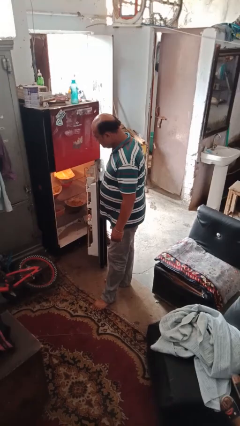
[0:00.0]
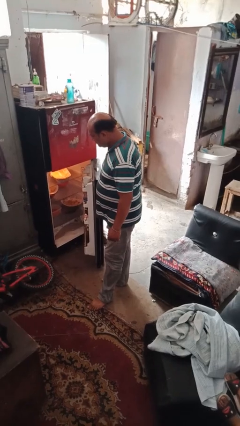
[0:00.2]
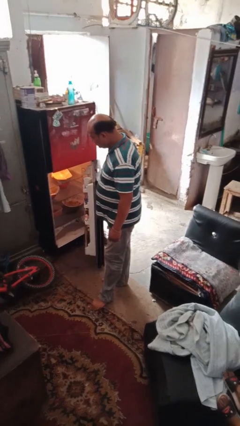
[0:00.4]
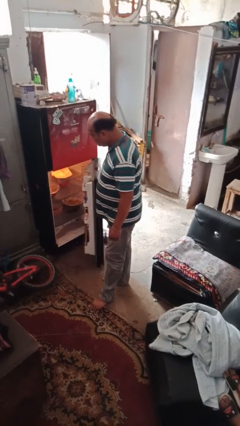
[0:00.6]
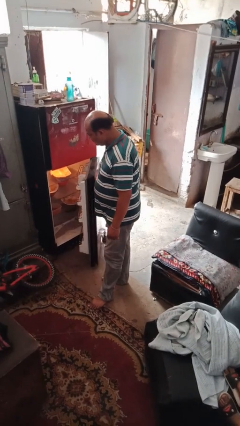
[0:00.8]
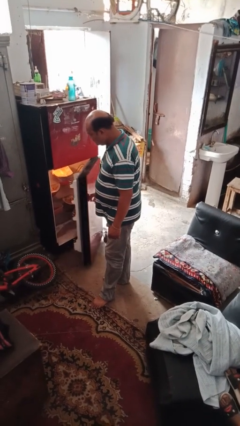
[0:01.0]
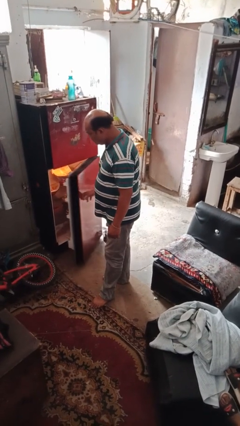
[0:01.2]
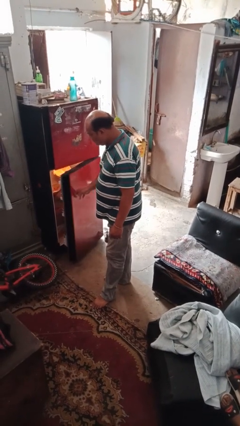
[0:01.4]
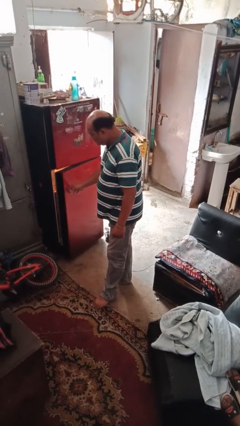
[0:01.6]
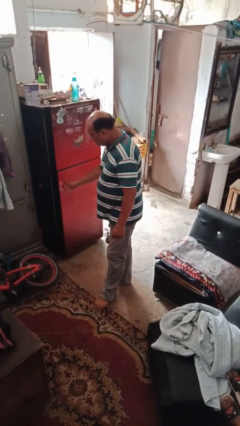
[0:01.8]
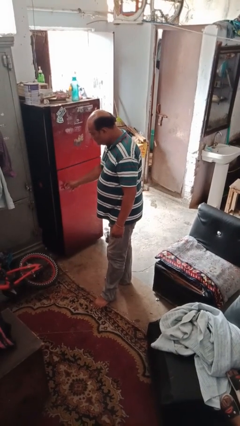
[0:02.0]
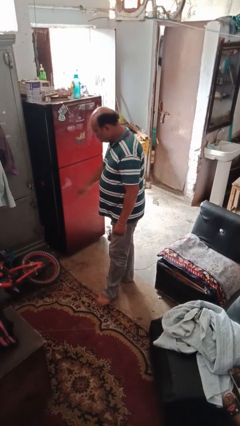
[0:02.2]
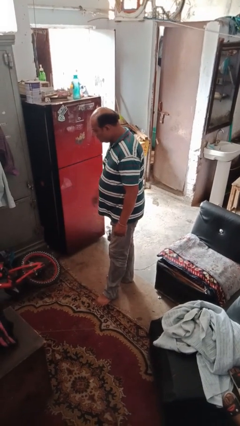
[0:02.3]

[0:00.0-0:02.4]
person closes refrigerator

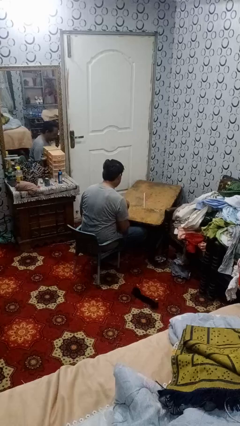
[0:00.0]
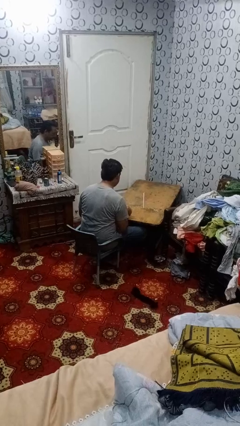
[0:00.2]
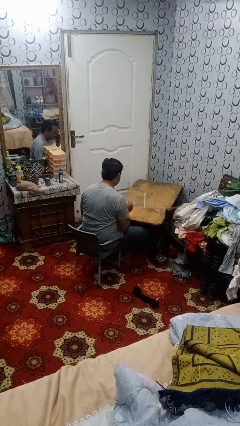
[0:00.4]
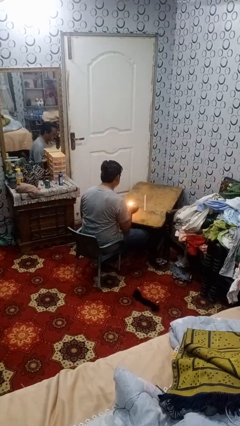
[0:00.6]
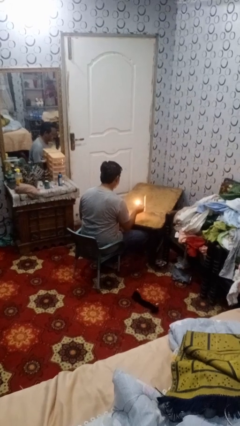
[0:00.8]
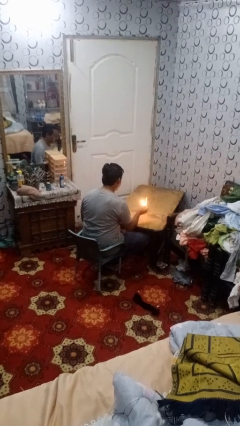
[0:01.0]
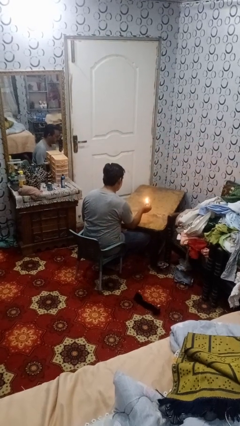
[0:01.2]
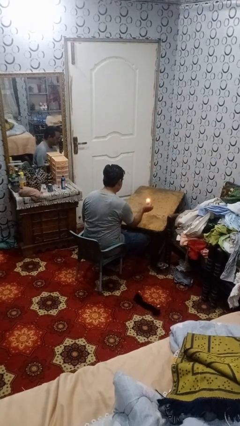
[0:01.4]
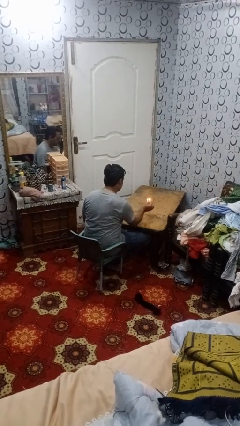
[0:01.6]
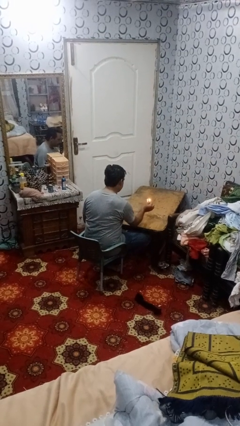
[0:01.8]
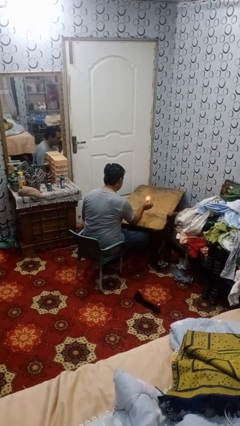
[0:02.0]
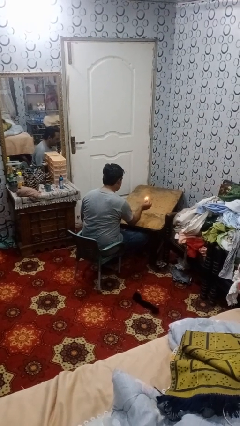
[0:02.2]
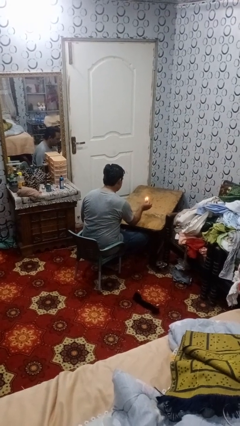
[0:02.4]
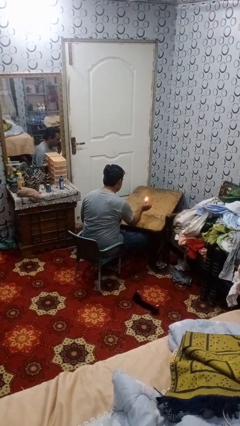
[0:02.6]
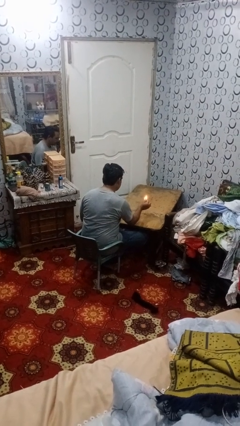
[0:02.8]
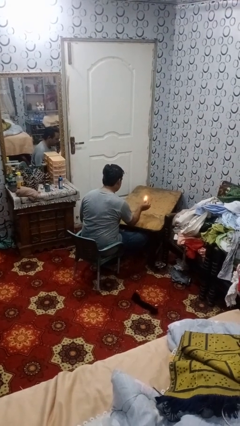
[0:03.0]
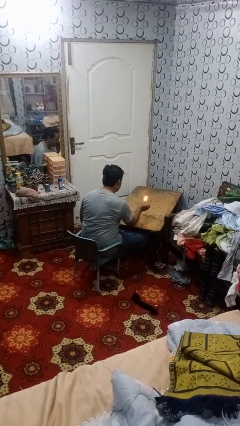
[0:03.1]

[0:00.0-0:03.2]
person lights candle

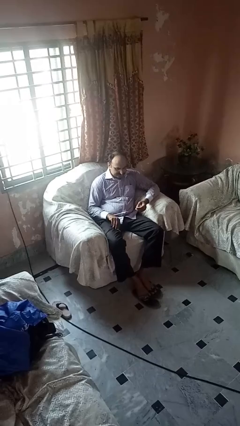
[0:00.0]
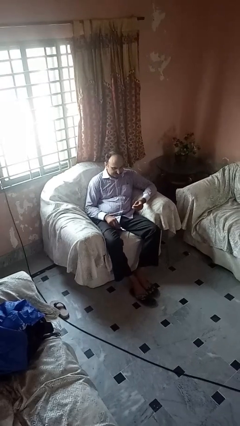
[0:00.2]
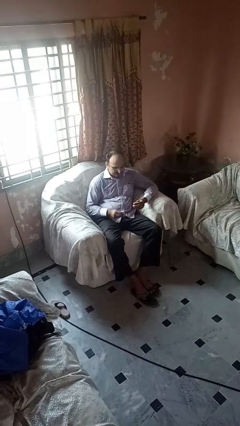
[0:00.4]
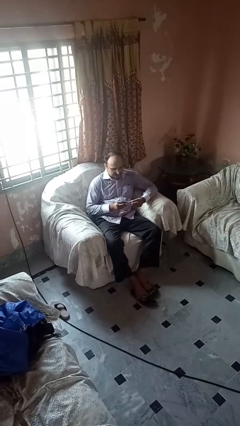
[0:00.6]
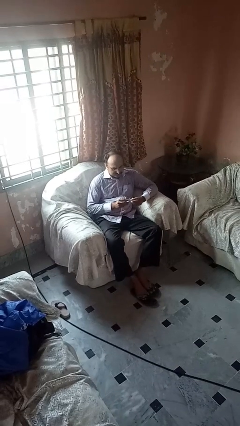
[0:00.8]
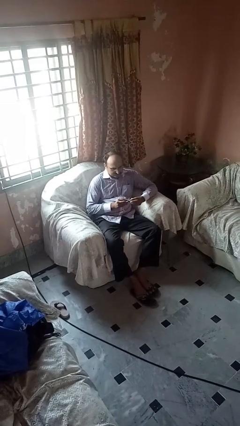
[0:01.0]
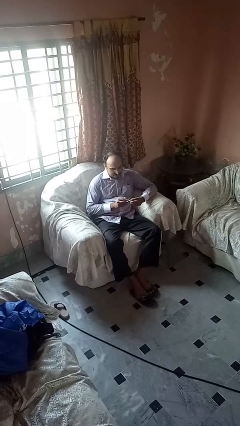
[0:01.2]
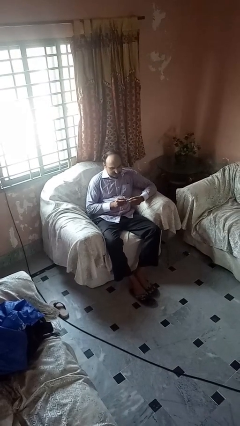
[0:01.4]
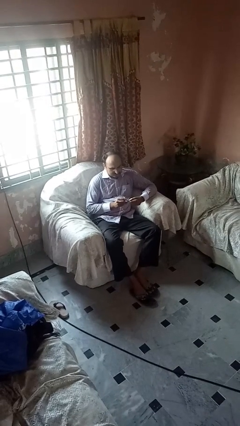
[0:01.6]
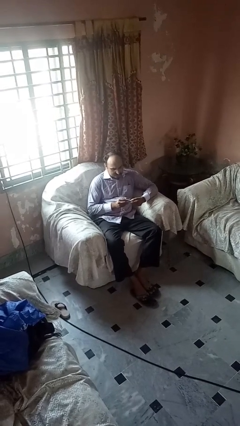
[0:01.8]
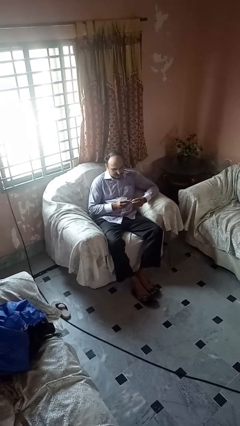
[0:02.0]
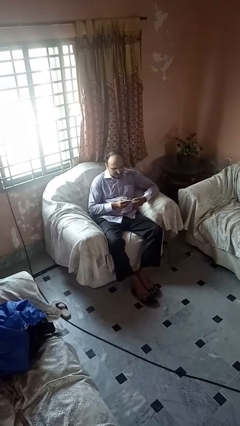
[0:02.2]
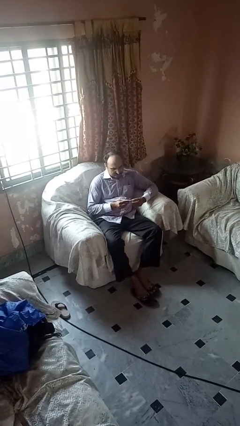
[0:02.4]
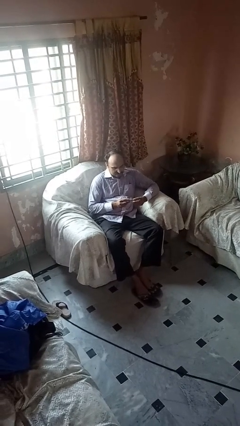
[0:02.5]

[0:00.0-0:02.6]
person files fingernails

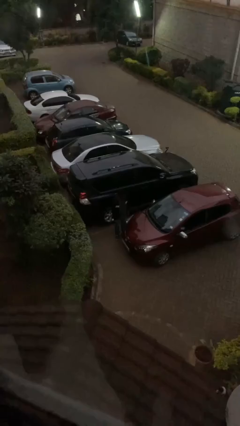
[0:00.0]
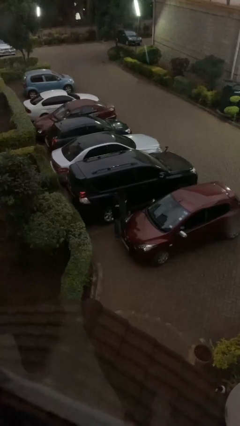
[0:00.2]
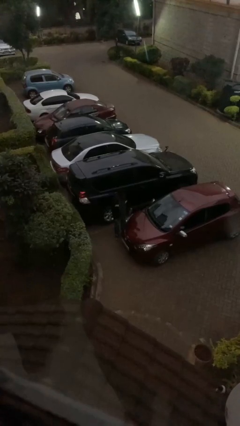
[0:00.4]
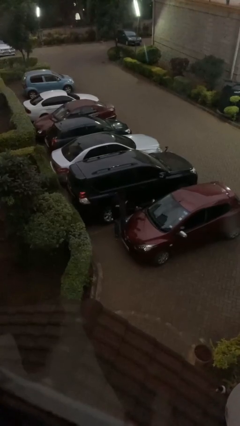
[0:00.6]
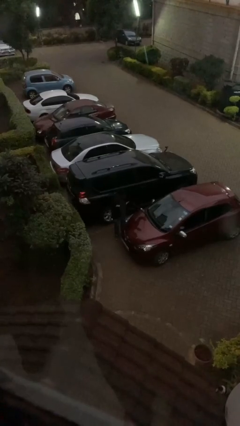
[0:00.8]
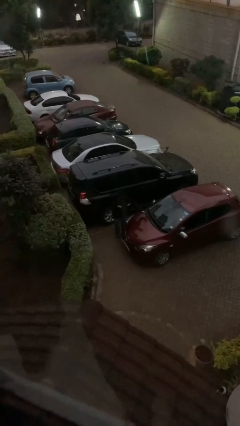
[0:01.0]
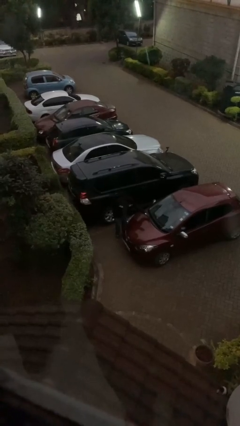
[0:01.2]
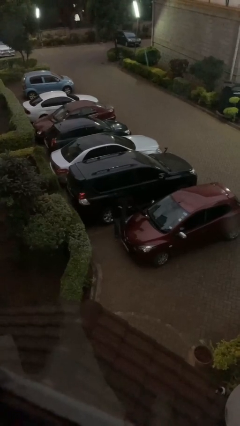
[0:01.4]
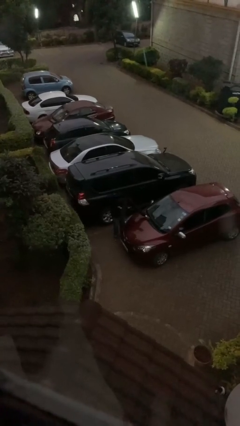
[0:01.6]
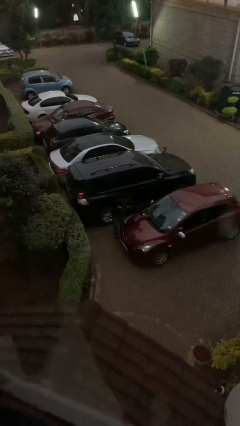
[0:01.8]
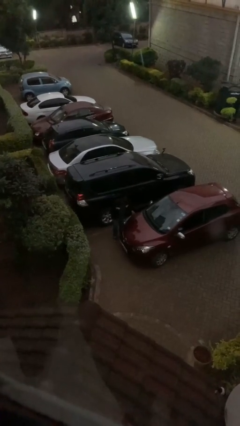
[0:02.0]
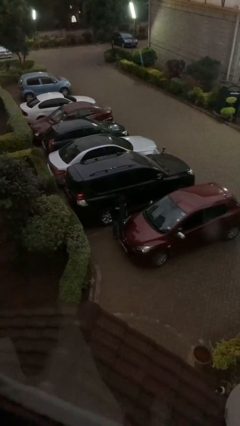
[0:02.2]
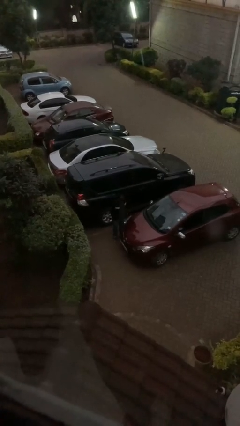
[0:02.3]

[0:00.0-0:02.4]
person flips down car wipers

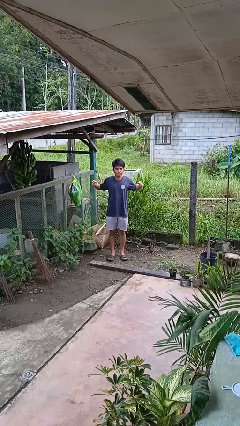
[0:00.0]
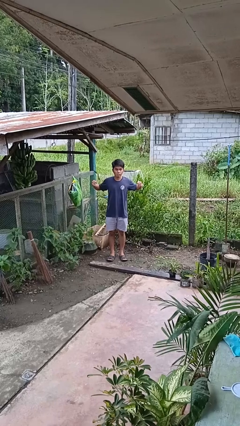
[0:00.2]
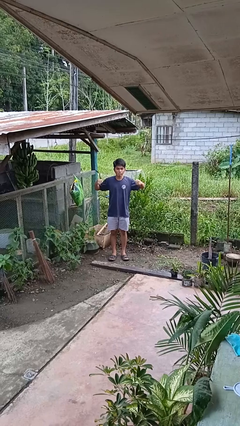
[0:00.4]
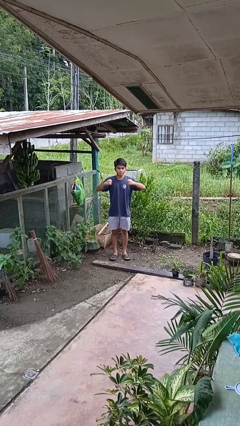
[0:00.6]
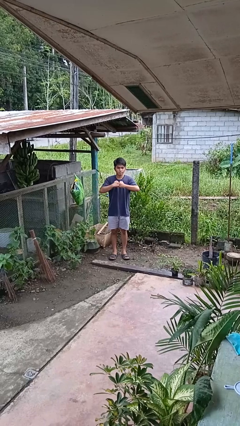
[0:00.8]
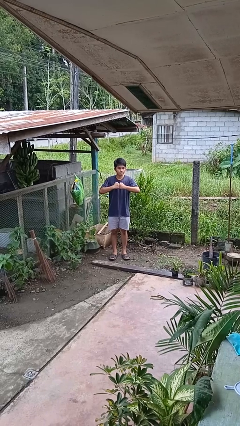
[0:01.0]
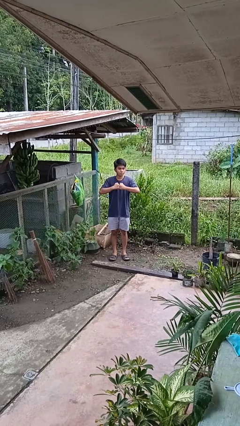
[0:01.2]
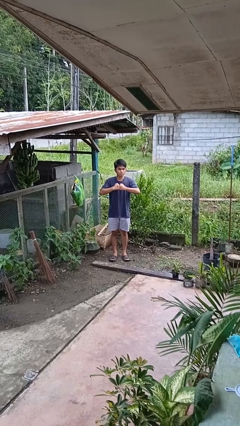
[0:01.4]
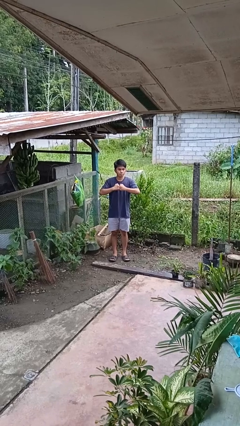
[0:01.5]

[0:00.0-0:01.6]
person gestures zoom out

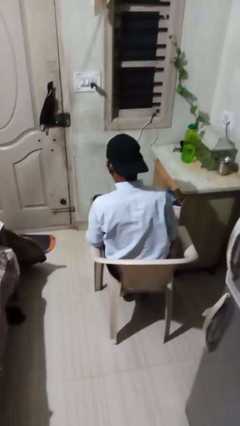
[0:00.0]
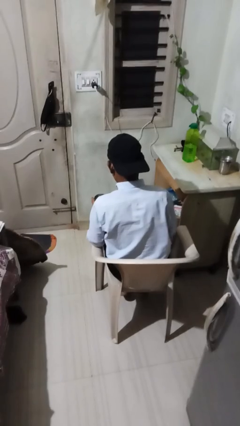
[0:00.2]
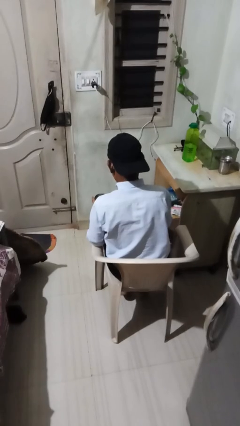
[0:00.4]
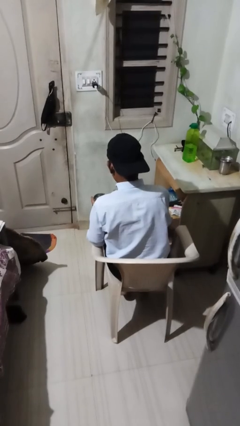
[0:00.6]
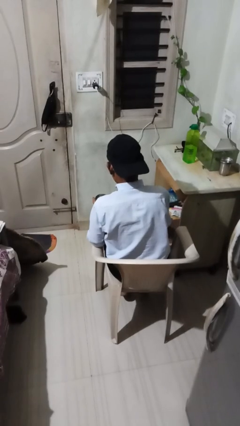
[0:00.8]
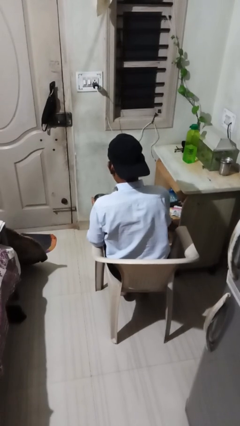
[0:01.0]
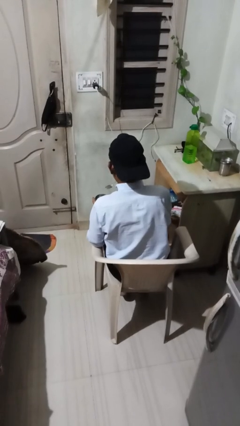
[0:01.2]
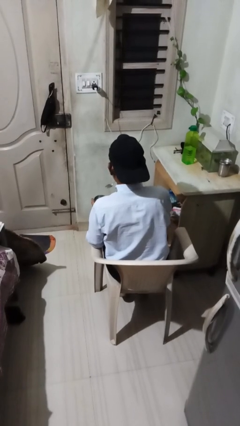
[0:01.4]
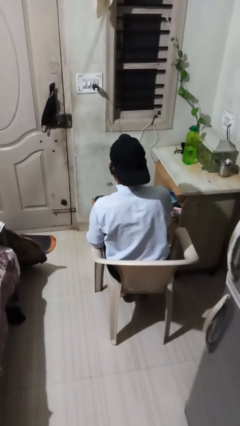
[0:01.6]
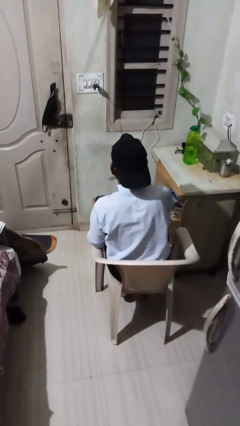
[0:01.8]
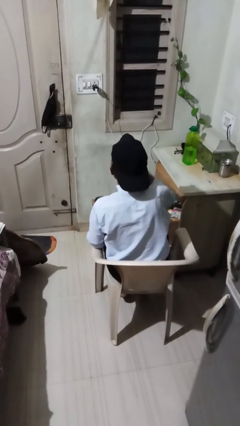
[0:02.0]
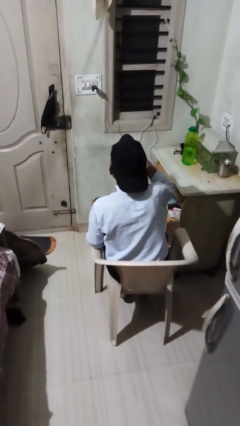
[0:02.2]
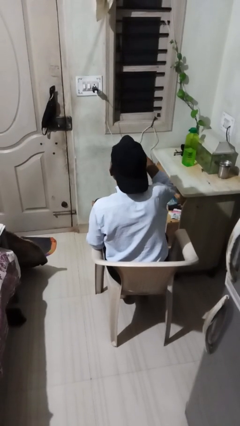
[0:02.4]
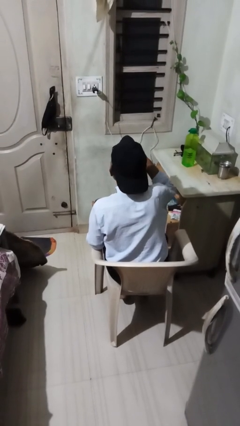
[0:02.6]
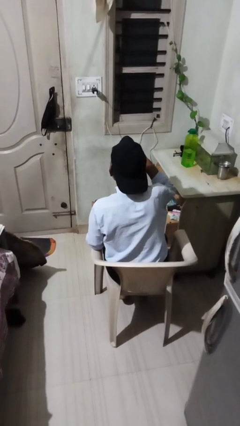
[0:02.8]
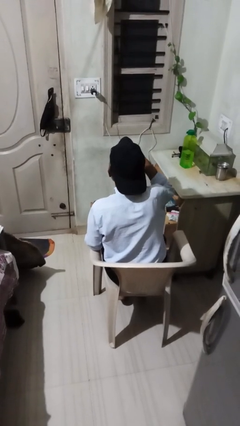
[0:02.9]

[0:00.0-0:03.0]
person eats with utensil

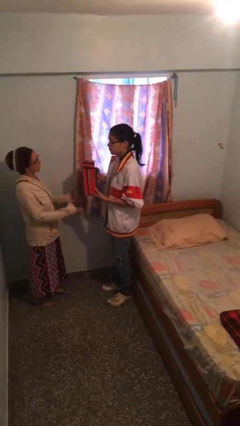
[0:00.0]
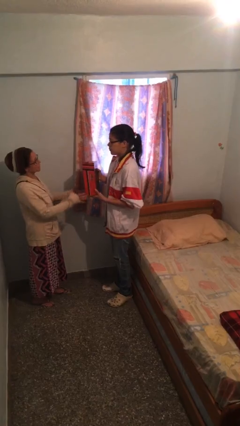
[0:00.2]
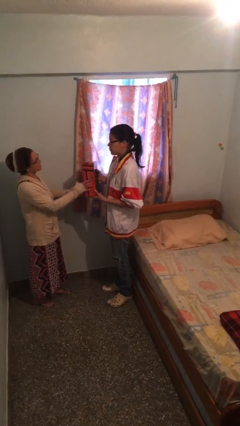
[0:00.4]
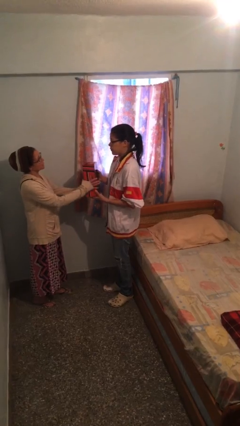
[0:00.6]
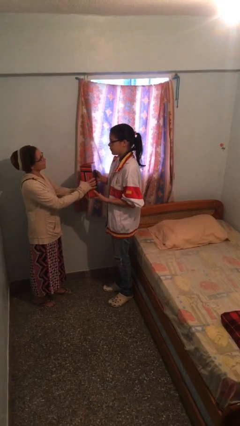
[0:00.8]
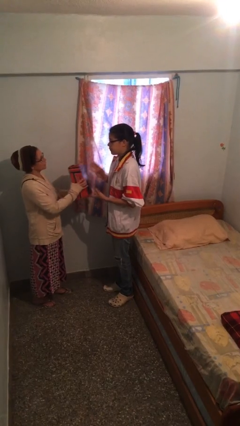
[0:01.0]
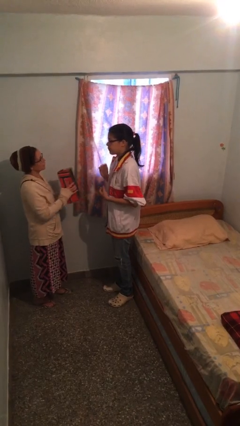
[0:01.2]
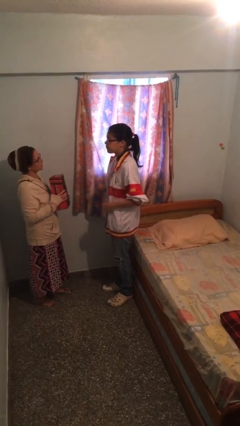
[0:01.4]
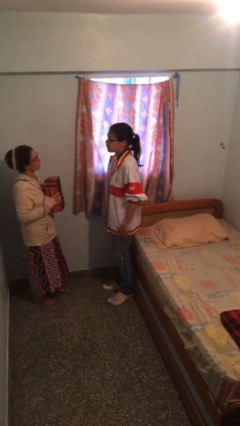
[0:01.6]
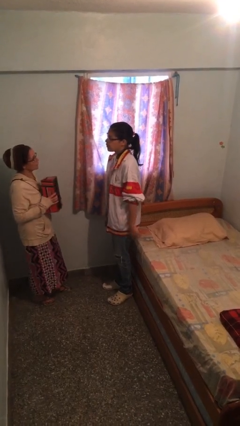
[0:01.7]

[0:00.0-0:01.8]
person transfers object to person
